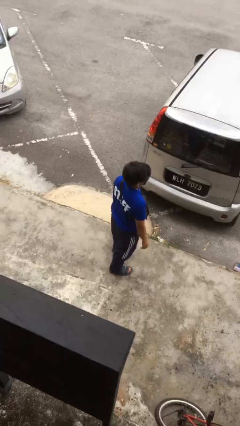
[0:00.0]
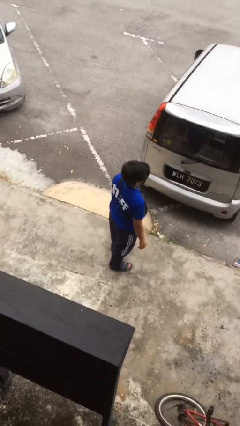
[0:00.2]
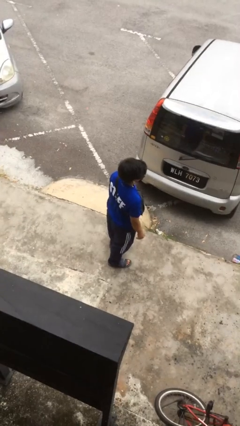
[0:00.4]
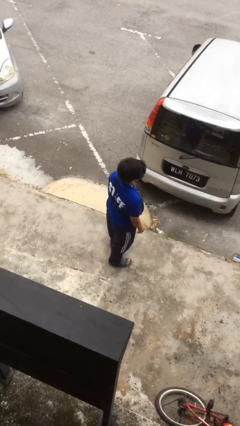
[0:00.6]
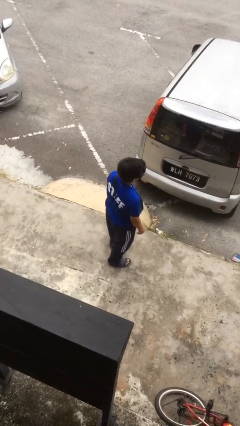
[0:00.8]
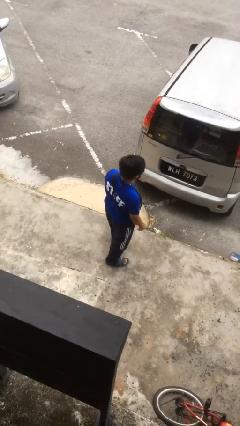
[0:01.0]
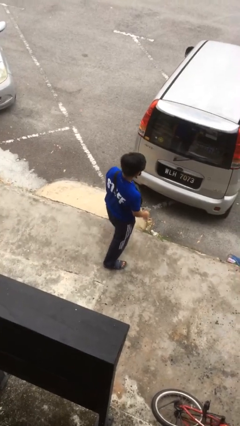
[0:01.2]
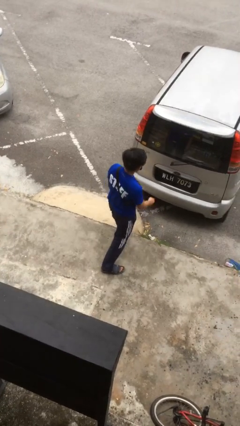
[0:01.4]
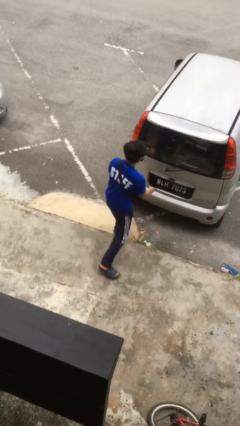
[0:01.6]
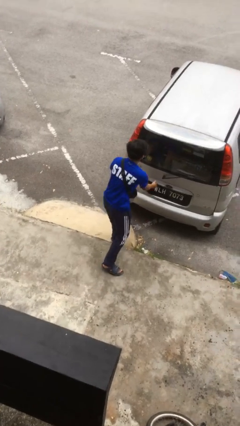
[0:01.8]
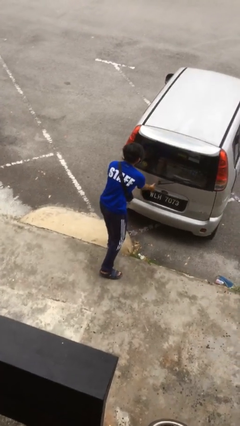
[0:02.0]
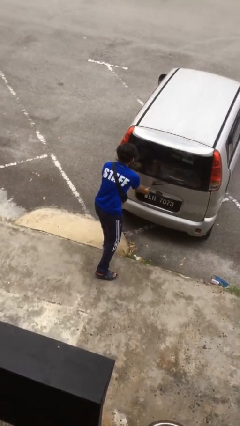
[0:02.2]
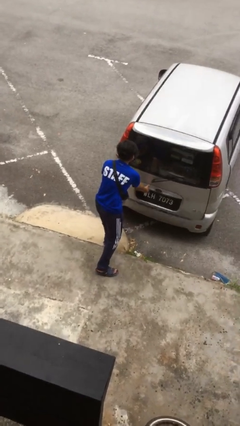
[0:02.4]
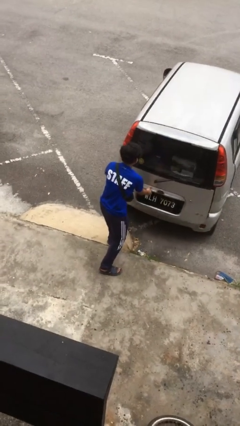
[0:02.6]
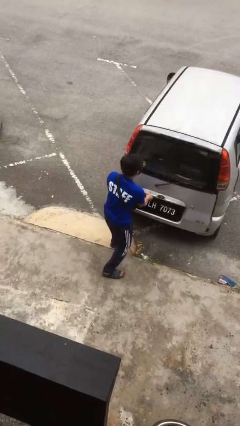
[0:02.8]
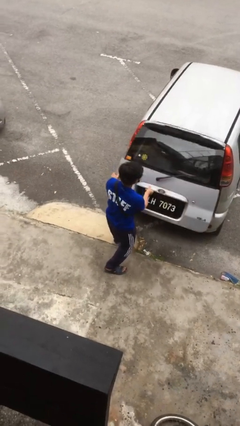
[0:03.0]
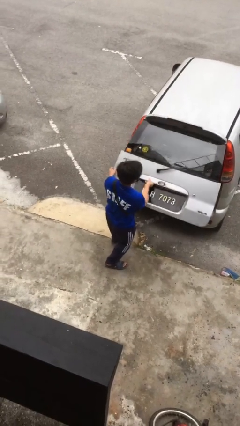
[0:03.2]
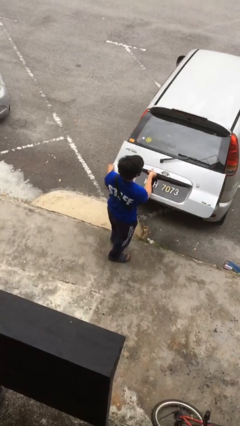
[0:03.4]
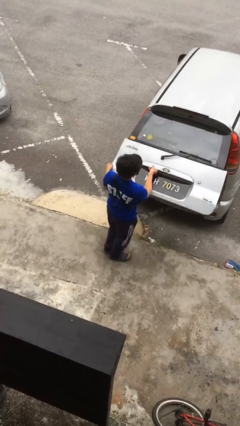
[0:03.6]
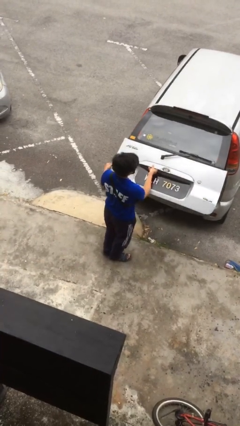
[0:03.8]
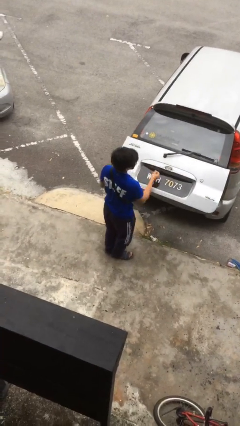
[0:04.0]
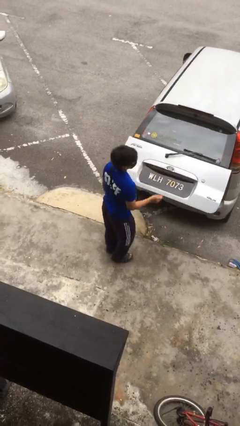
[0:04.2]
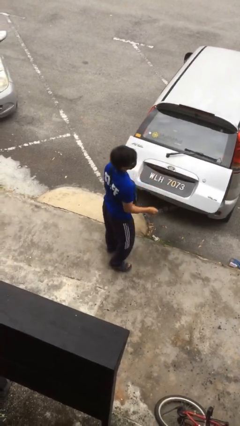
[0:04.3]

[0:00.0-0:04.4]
person opens car trunk

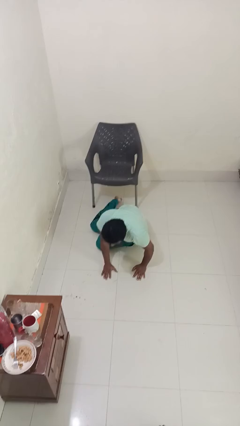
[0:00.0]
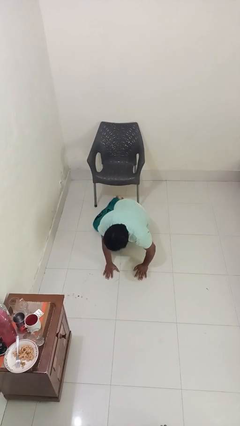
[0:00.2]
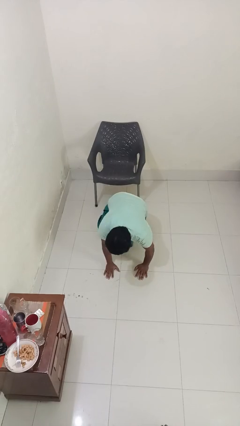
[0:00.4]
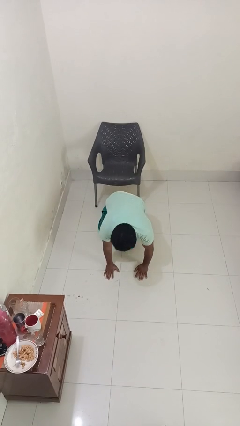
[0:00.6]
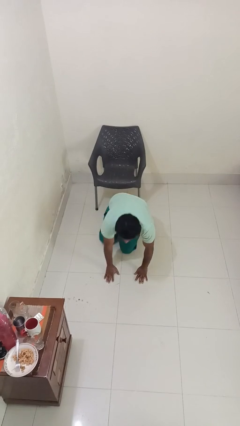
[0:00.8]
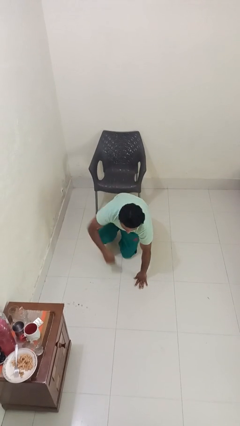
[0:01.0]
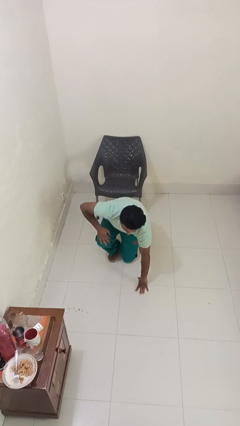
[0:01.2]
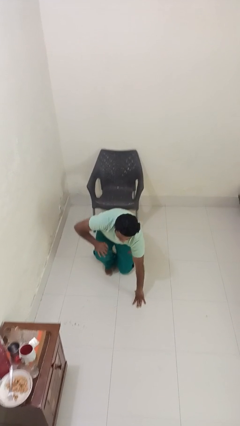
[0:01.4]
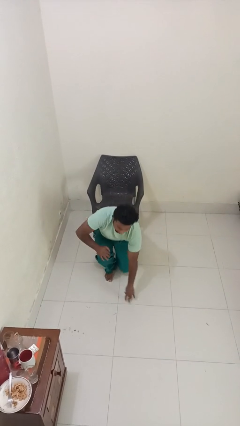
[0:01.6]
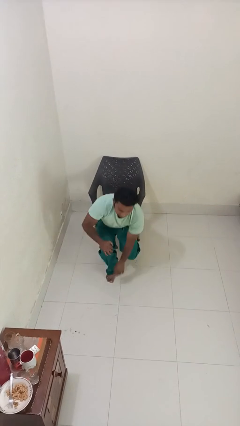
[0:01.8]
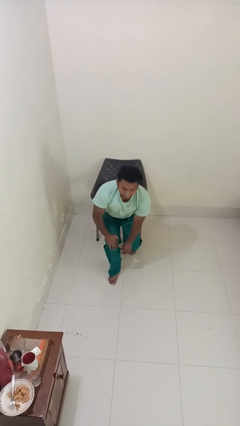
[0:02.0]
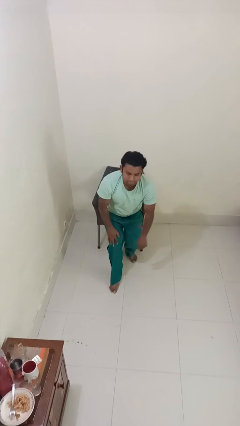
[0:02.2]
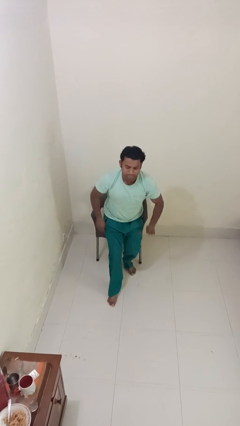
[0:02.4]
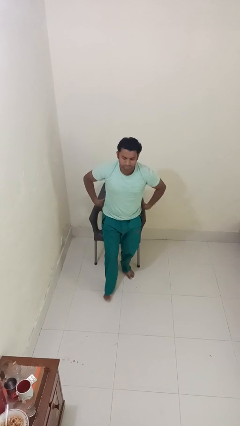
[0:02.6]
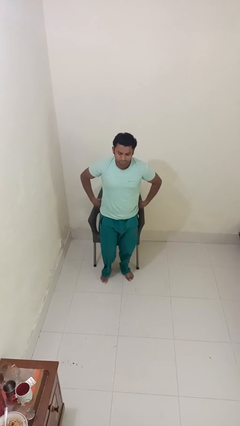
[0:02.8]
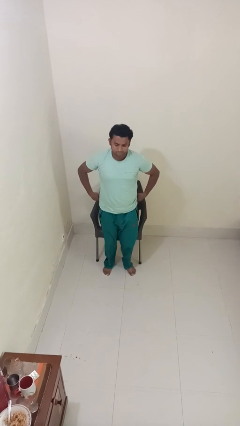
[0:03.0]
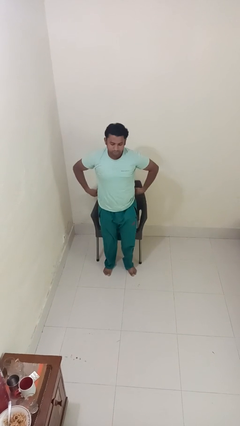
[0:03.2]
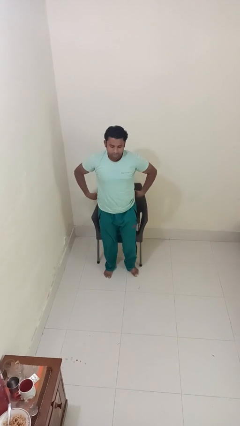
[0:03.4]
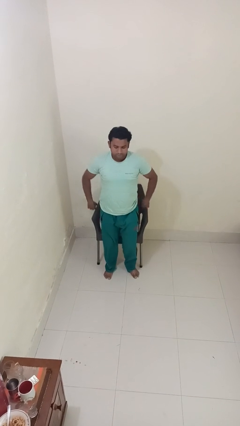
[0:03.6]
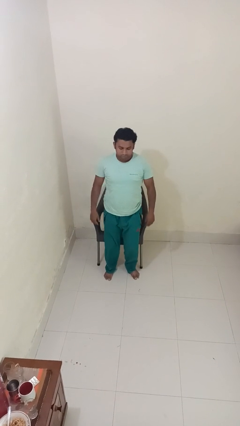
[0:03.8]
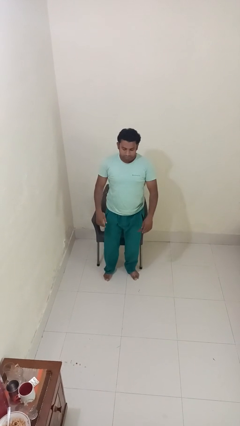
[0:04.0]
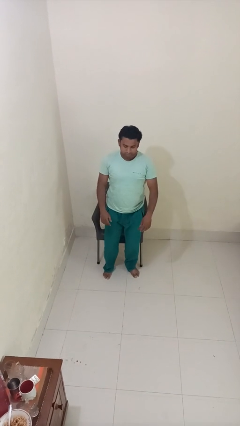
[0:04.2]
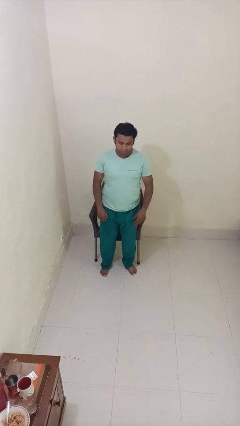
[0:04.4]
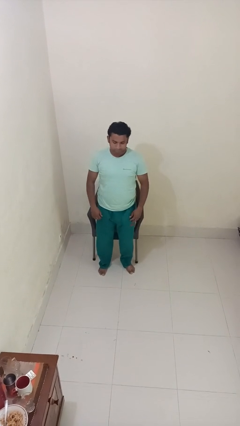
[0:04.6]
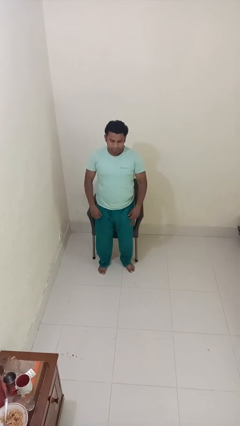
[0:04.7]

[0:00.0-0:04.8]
person stands up from floor

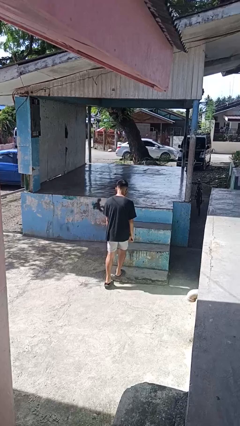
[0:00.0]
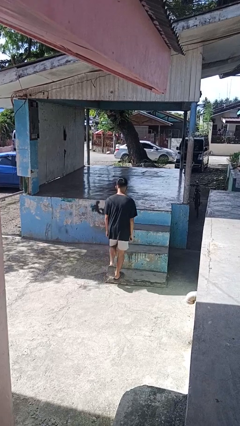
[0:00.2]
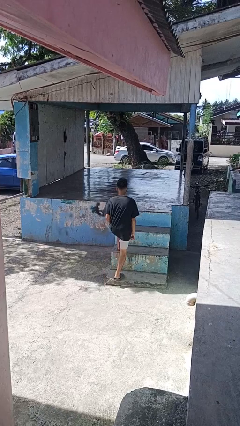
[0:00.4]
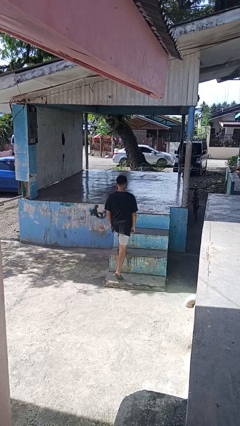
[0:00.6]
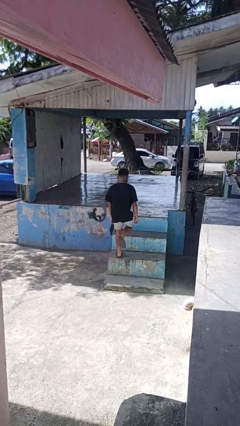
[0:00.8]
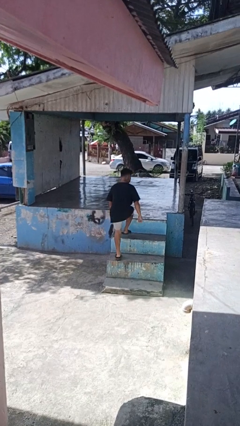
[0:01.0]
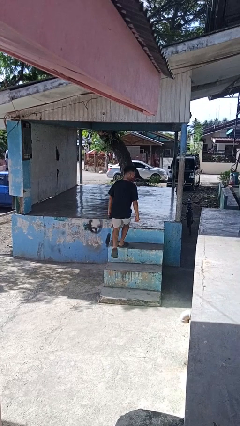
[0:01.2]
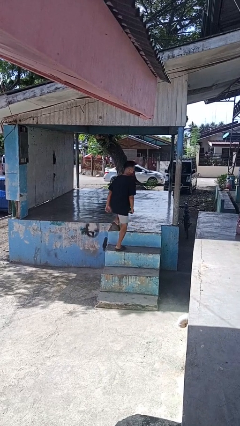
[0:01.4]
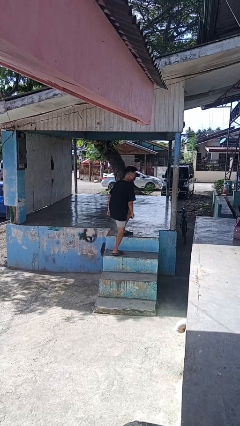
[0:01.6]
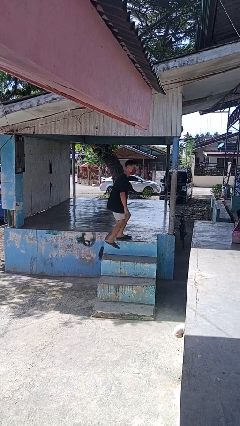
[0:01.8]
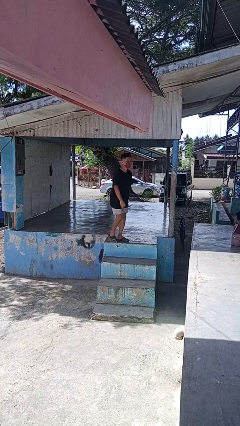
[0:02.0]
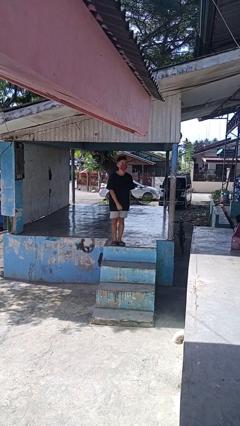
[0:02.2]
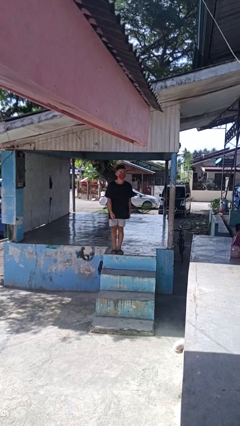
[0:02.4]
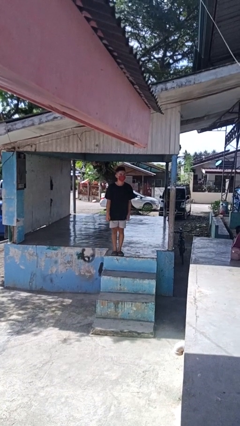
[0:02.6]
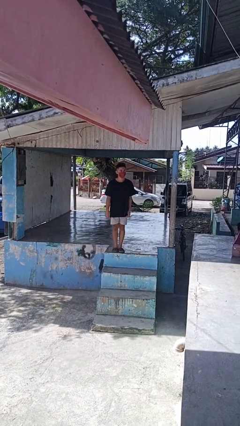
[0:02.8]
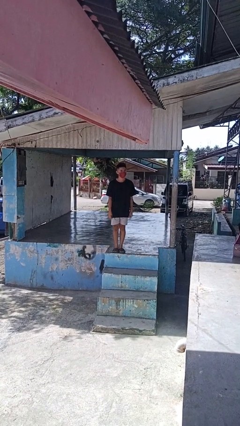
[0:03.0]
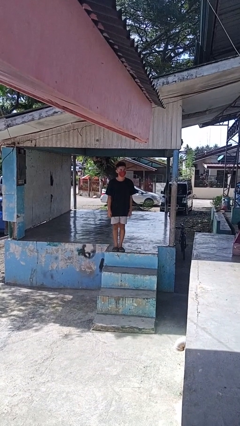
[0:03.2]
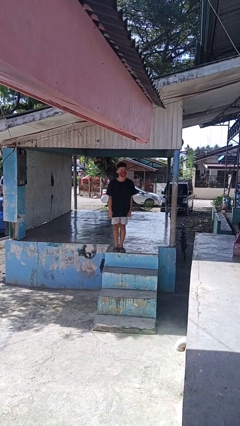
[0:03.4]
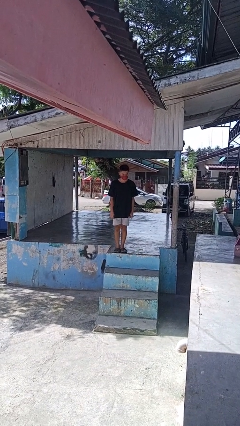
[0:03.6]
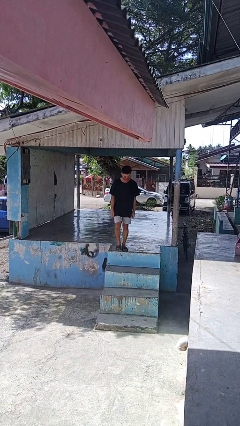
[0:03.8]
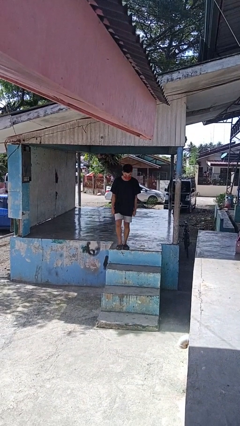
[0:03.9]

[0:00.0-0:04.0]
person climbs up stairs

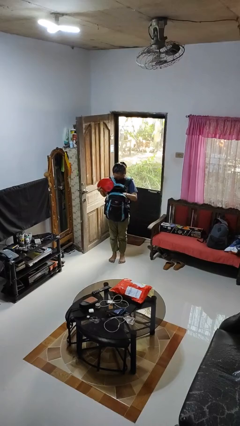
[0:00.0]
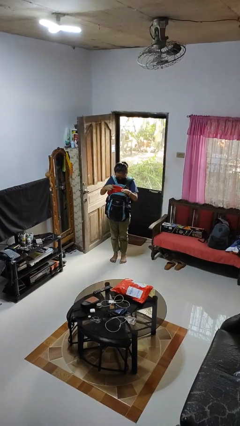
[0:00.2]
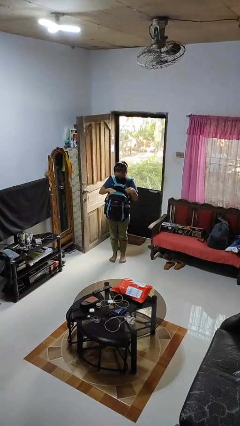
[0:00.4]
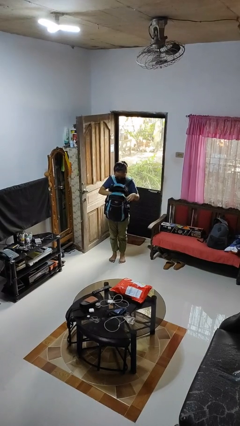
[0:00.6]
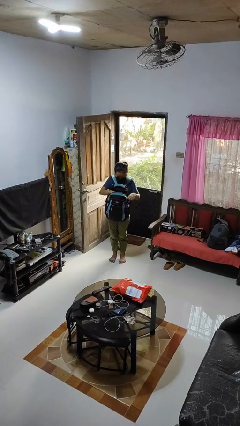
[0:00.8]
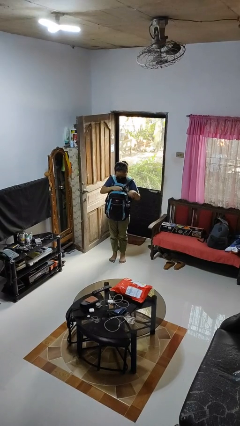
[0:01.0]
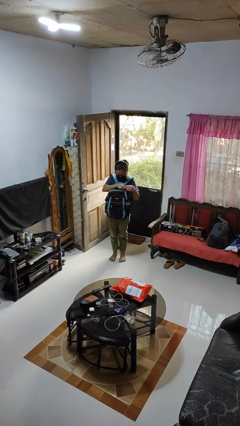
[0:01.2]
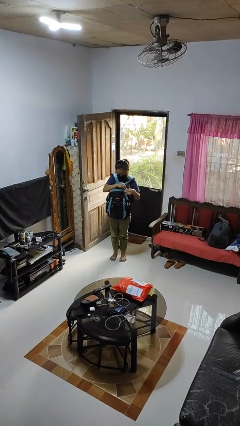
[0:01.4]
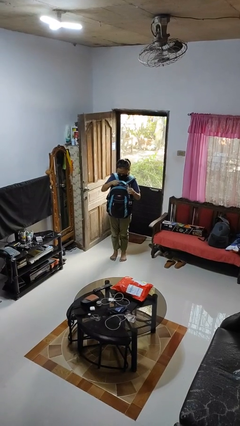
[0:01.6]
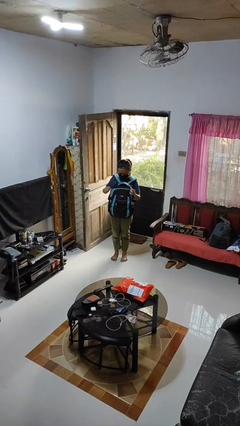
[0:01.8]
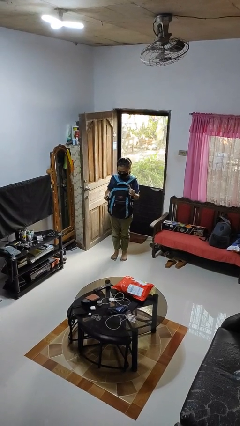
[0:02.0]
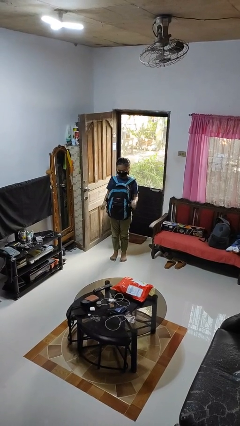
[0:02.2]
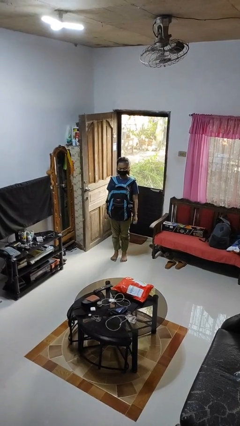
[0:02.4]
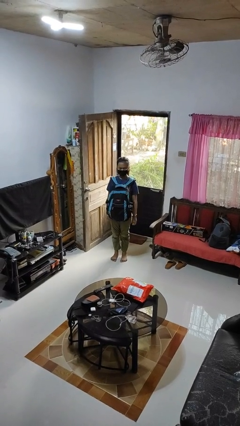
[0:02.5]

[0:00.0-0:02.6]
person puts object into backpack

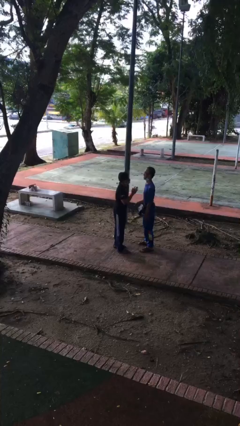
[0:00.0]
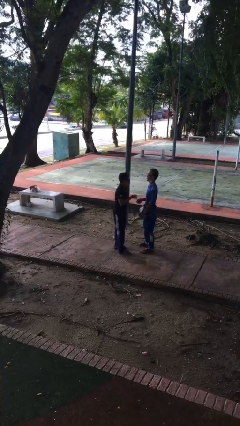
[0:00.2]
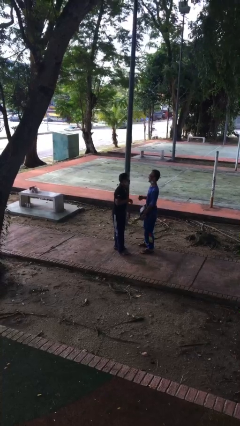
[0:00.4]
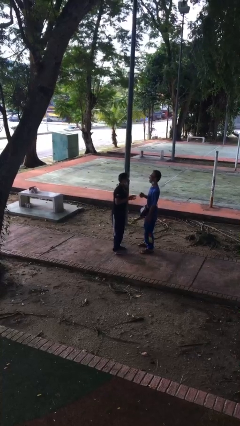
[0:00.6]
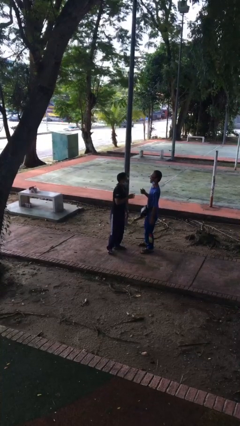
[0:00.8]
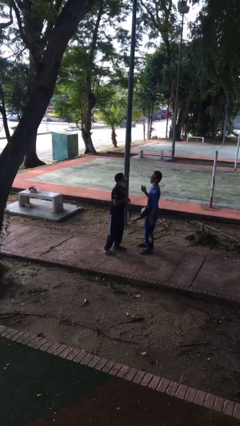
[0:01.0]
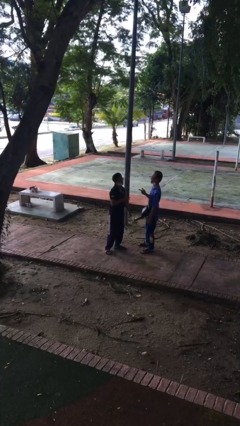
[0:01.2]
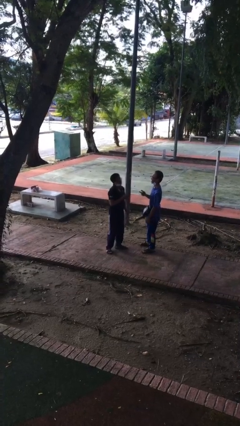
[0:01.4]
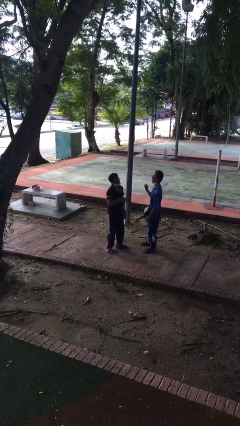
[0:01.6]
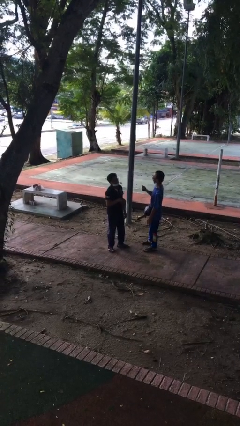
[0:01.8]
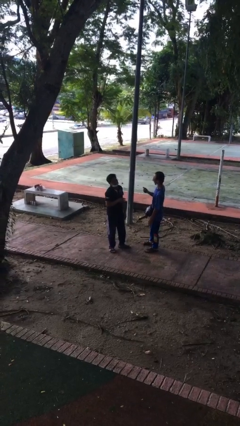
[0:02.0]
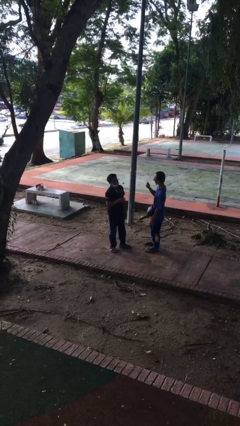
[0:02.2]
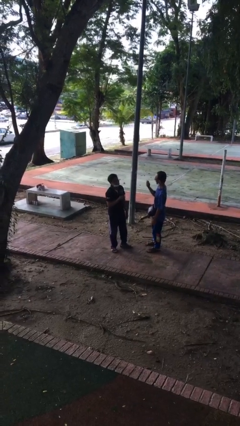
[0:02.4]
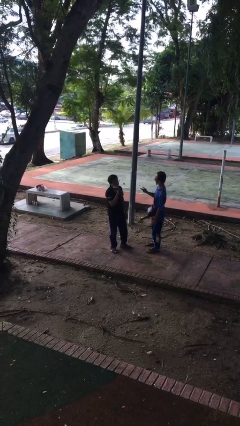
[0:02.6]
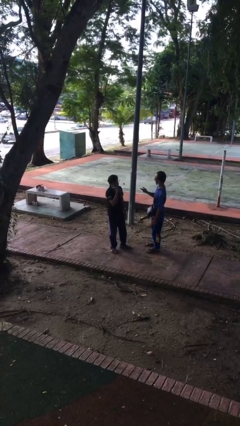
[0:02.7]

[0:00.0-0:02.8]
person talks to person
